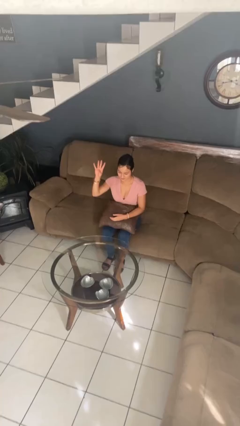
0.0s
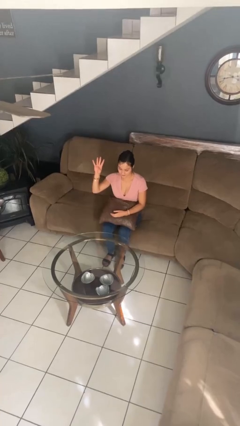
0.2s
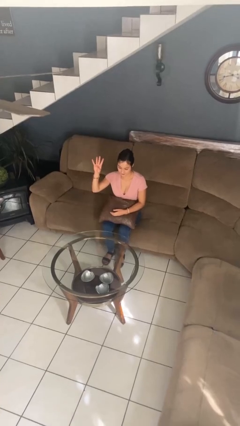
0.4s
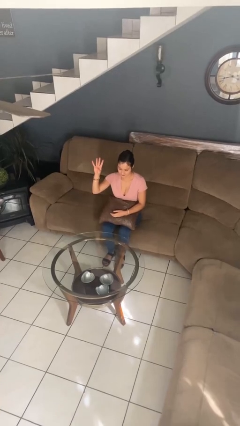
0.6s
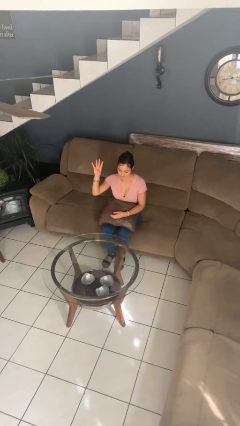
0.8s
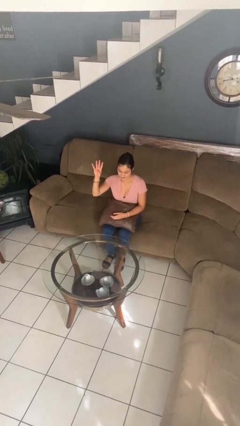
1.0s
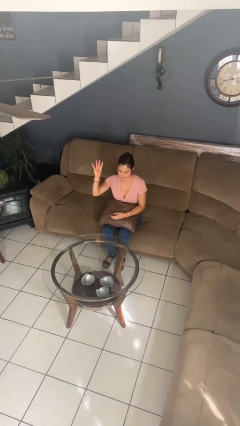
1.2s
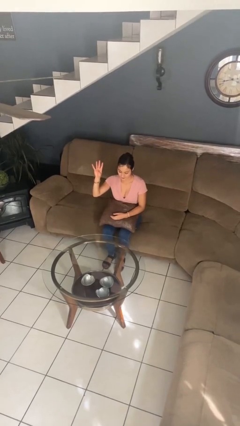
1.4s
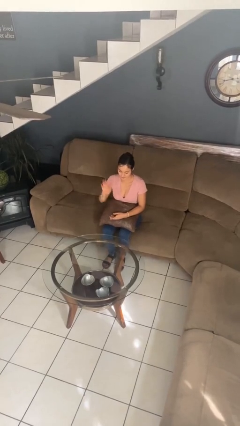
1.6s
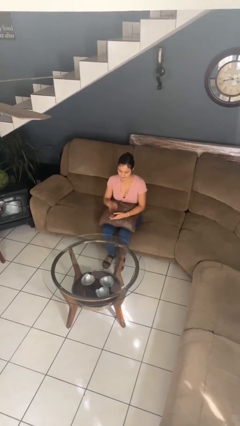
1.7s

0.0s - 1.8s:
person gestures number four

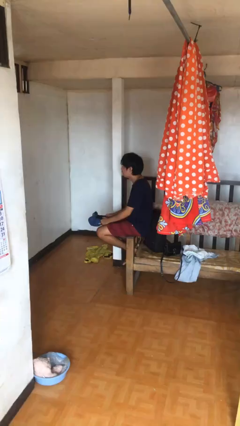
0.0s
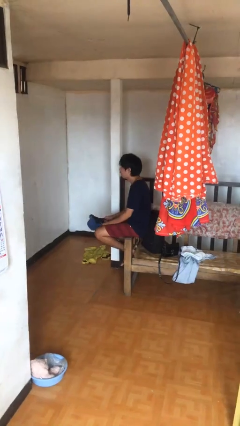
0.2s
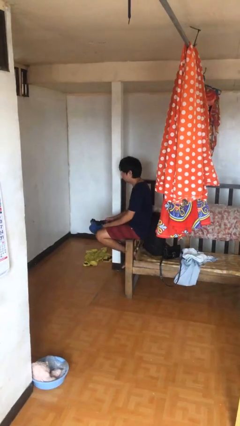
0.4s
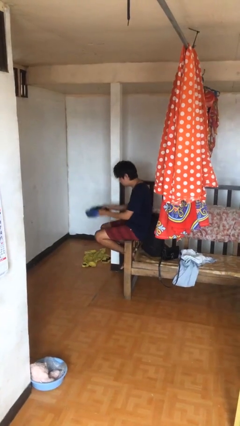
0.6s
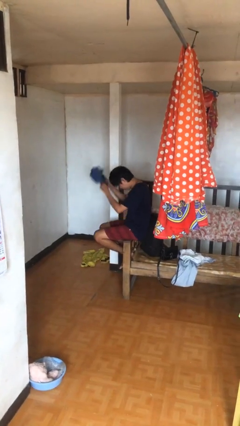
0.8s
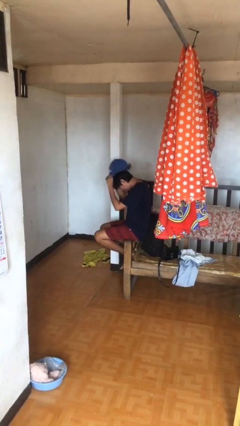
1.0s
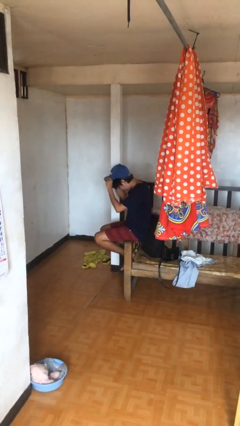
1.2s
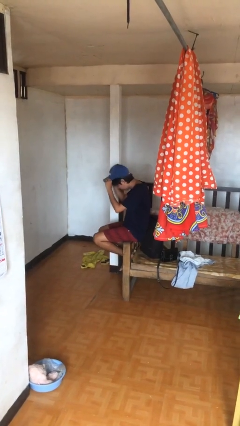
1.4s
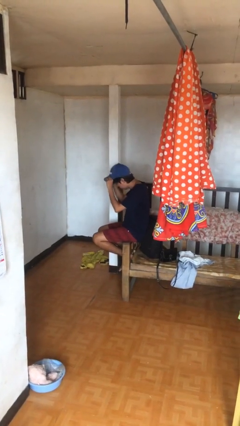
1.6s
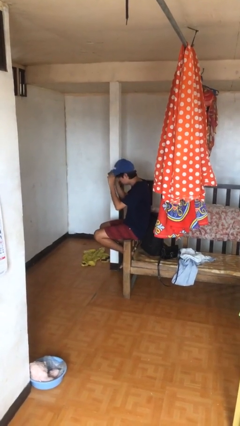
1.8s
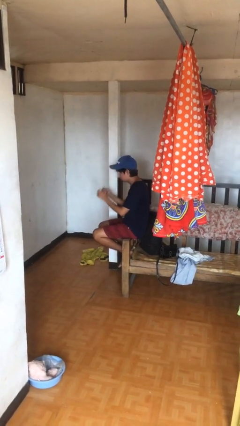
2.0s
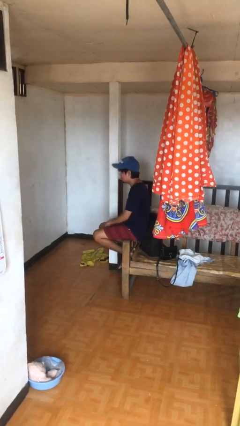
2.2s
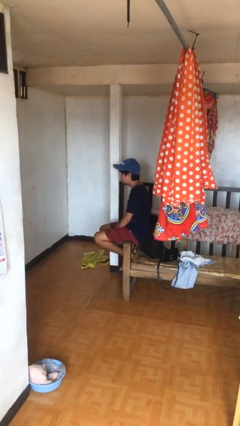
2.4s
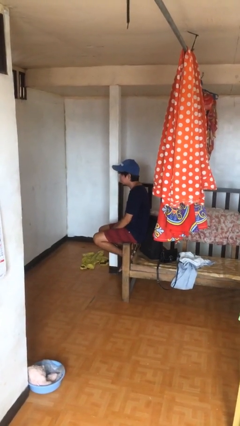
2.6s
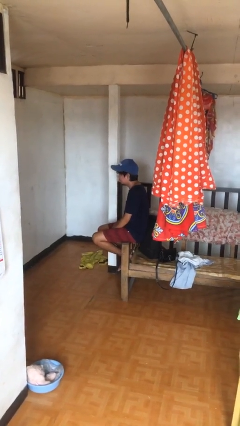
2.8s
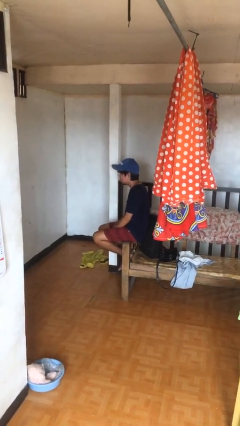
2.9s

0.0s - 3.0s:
person puts on hat

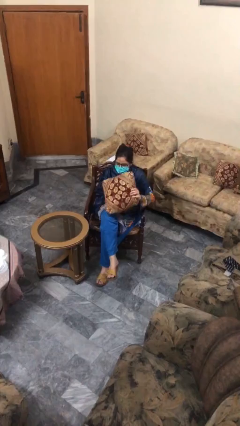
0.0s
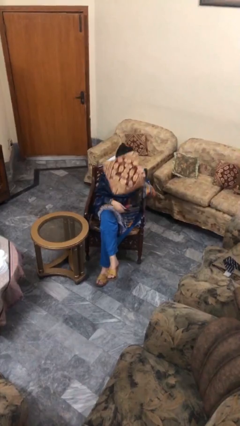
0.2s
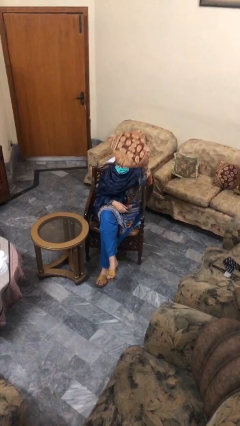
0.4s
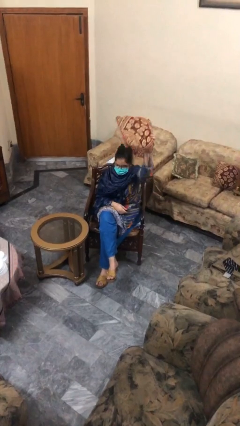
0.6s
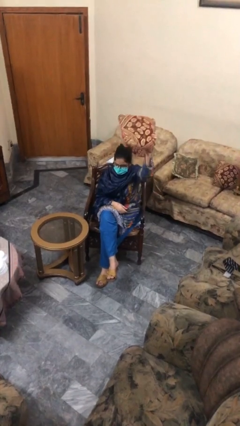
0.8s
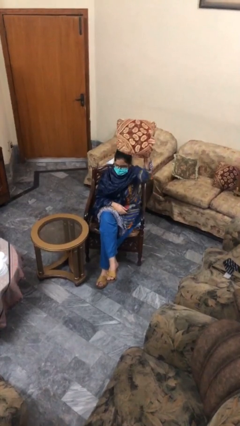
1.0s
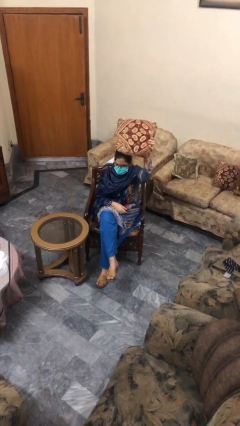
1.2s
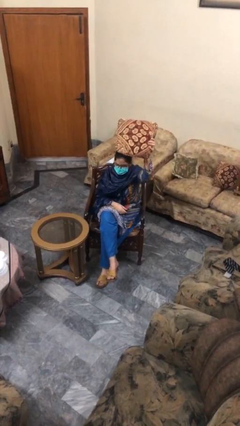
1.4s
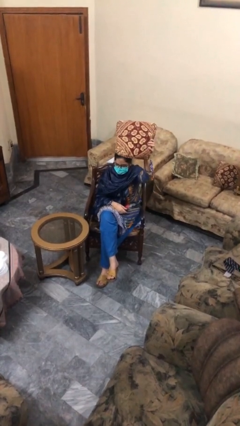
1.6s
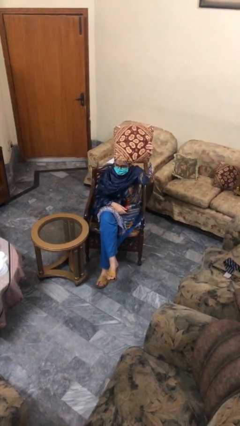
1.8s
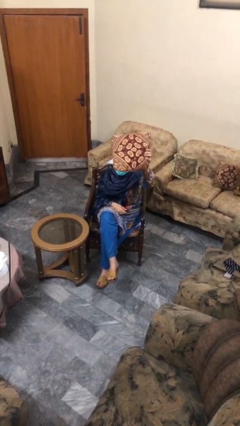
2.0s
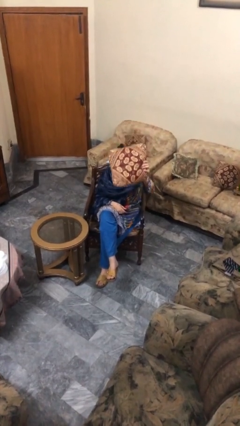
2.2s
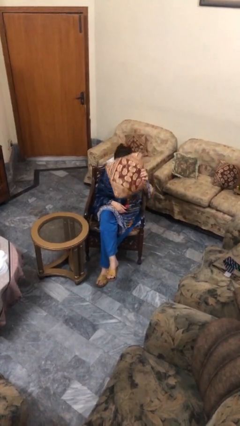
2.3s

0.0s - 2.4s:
person holds object above head

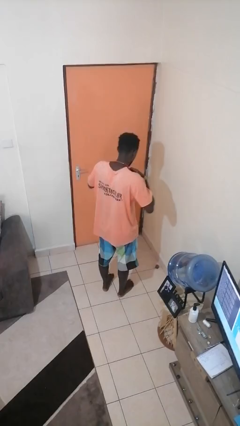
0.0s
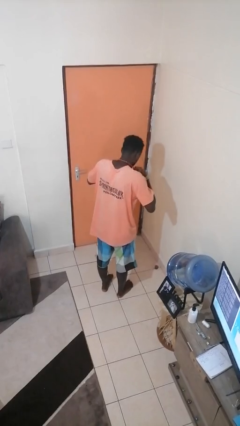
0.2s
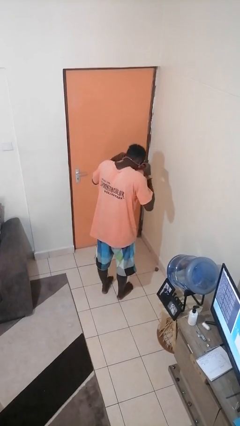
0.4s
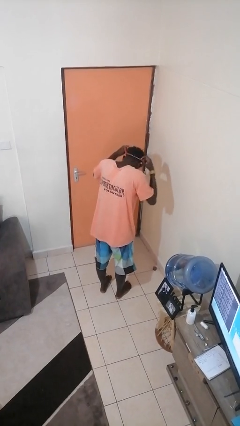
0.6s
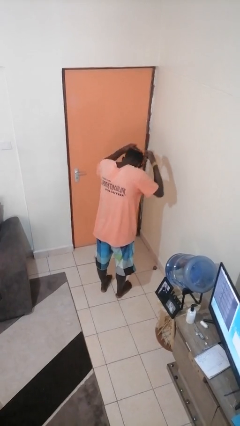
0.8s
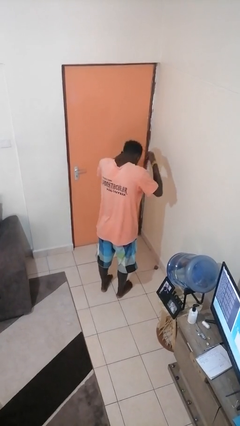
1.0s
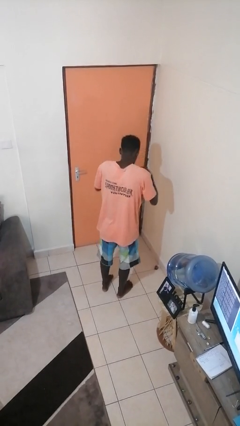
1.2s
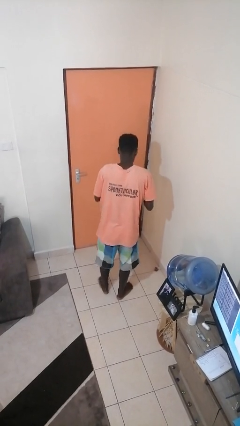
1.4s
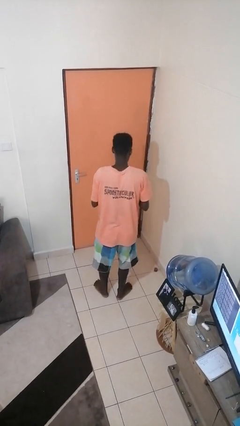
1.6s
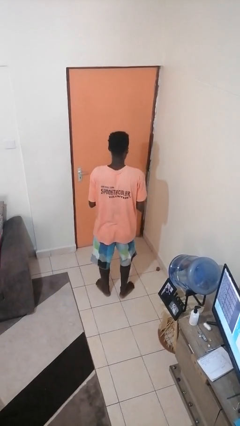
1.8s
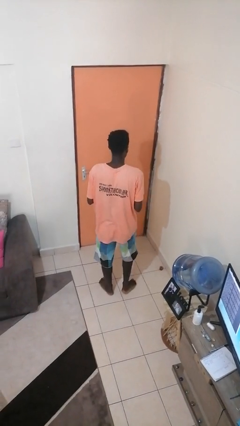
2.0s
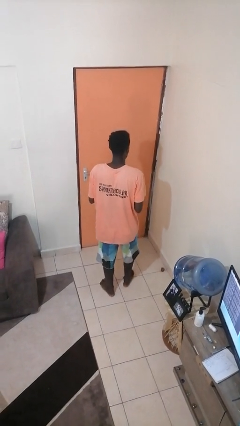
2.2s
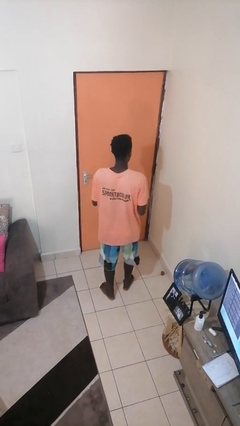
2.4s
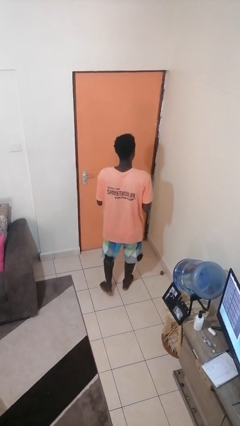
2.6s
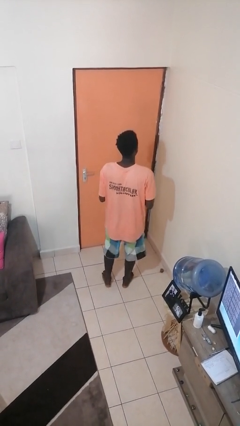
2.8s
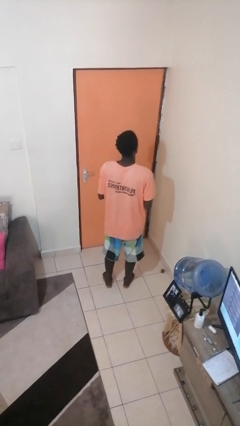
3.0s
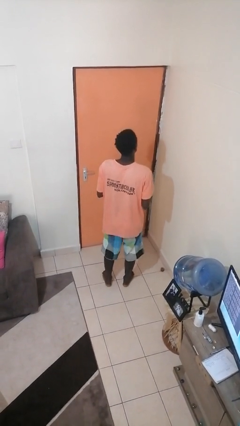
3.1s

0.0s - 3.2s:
person takes off necklace

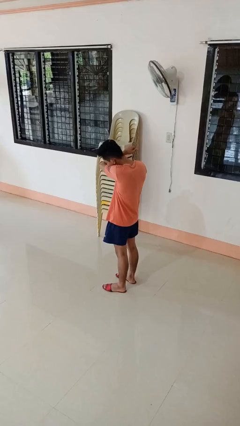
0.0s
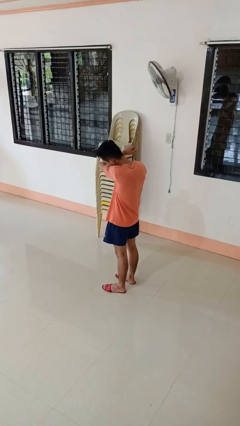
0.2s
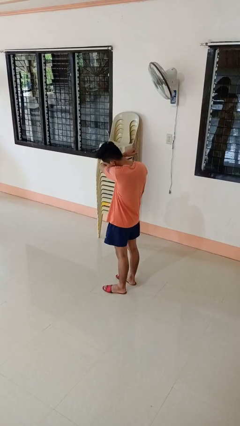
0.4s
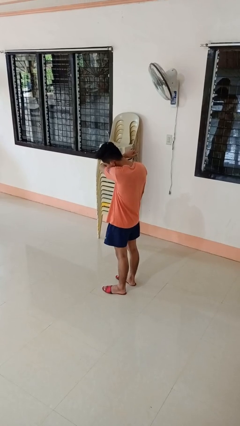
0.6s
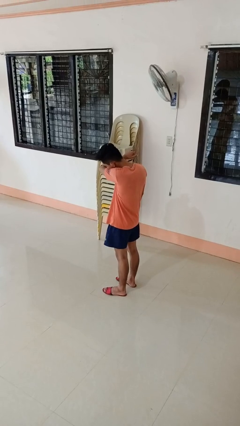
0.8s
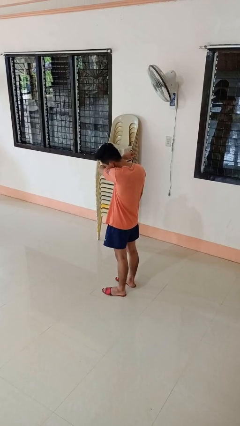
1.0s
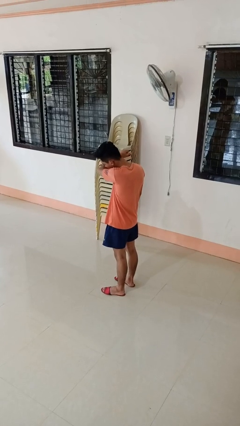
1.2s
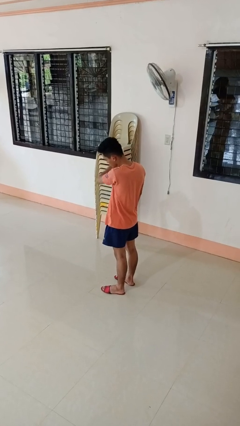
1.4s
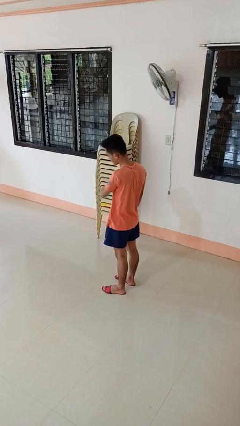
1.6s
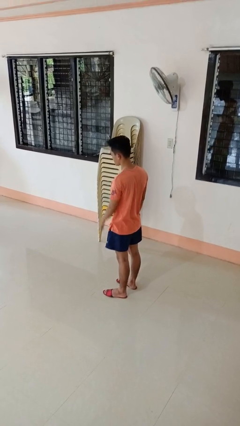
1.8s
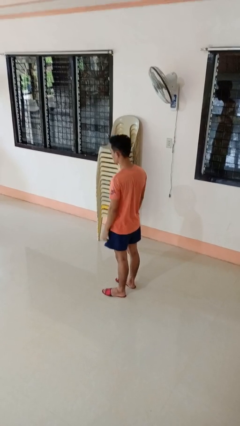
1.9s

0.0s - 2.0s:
person sneezes into arm

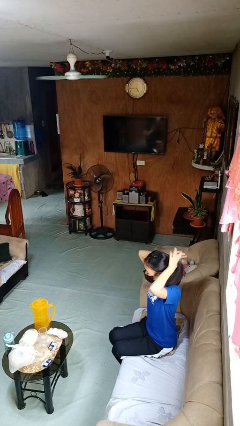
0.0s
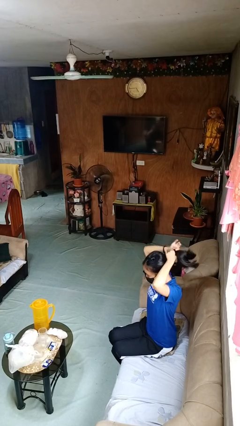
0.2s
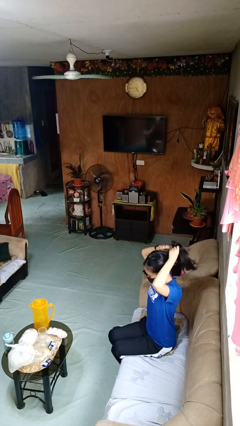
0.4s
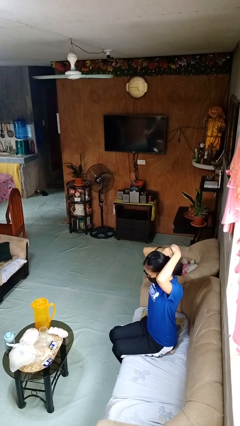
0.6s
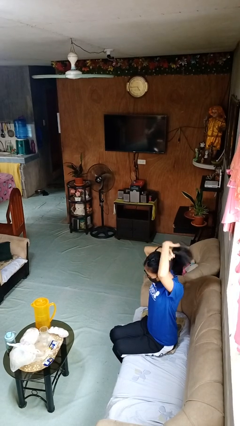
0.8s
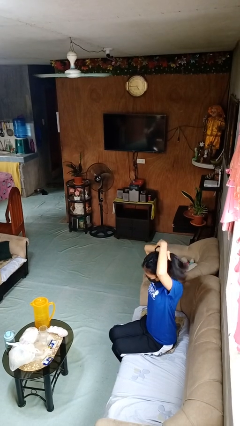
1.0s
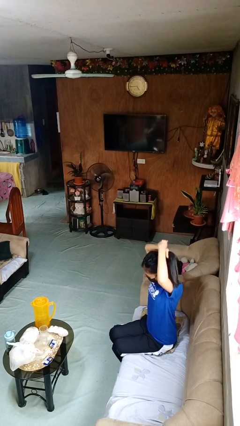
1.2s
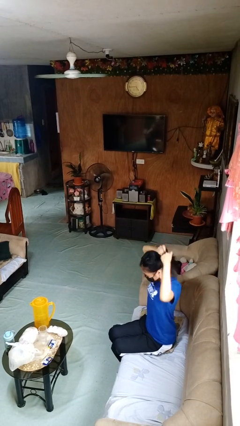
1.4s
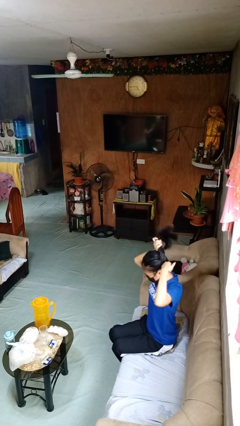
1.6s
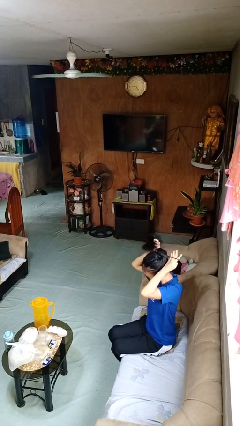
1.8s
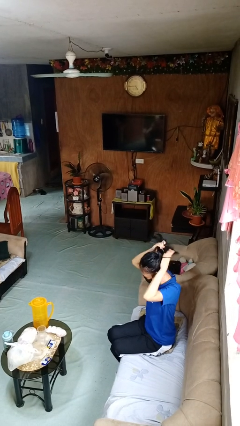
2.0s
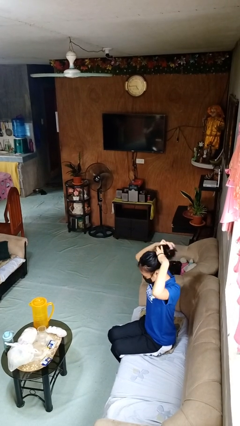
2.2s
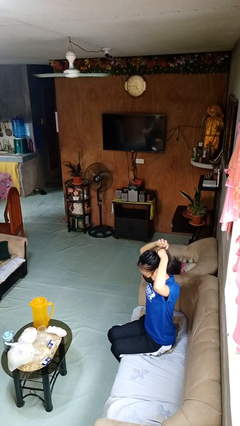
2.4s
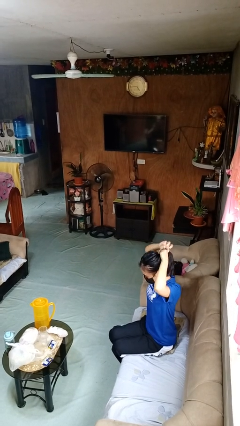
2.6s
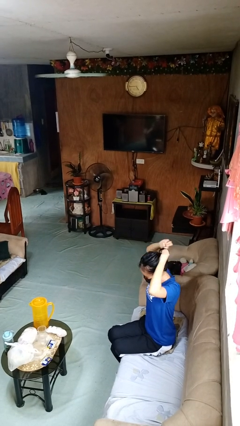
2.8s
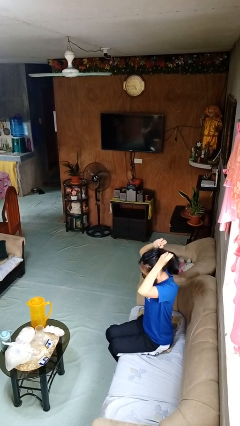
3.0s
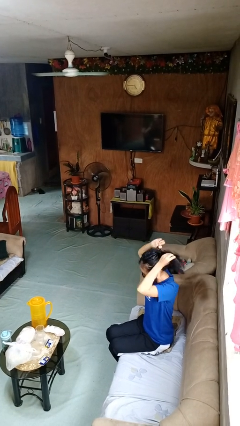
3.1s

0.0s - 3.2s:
person puts hair in ponytail

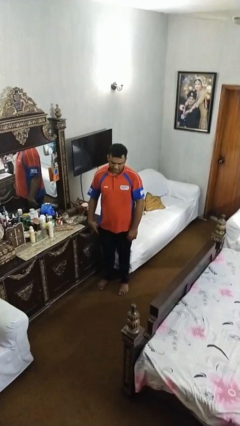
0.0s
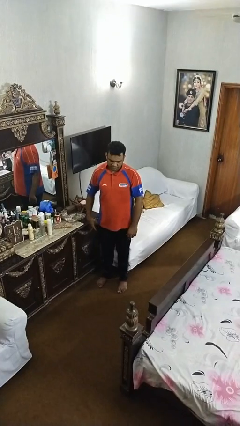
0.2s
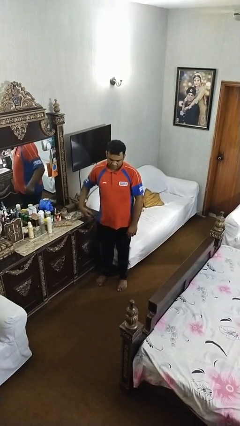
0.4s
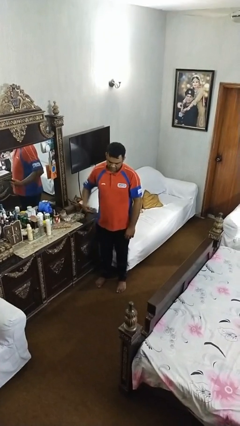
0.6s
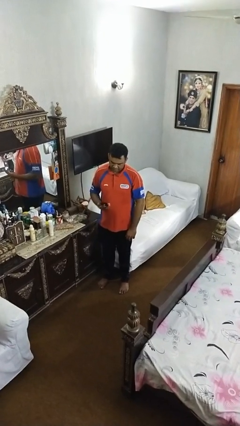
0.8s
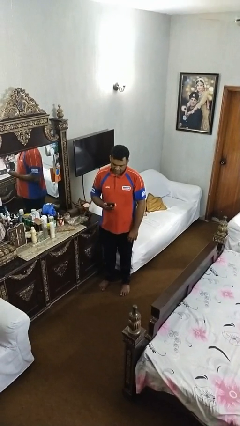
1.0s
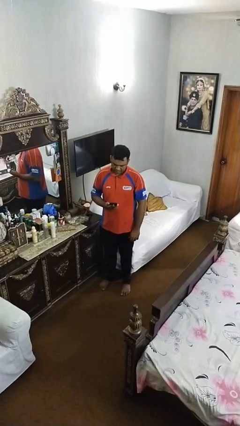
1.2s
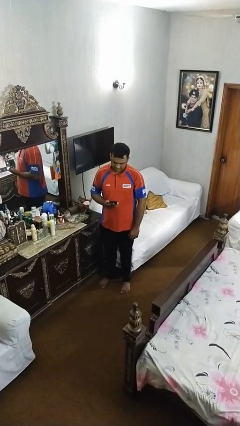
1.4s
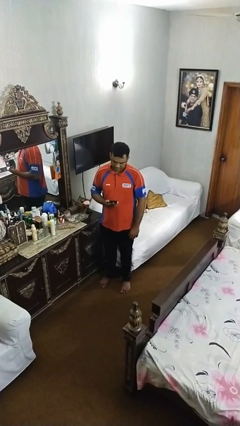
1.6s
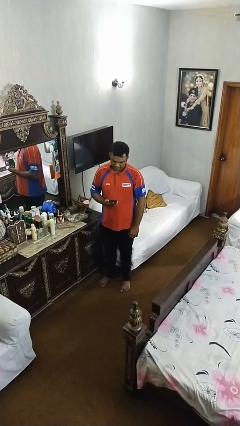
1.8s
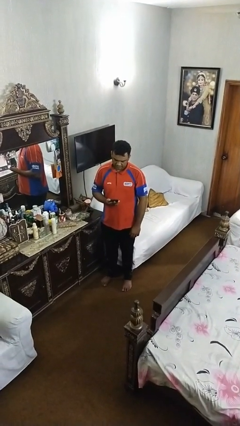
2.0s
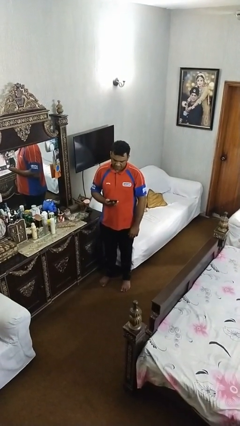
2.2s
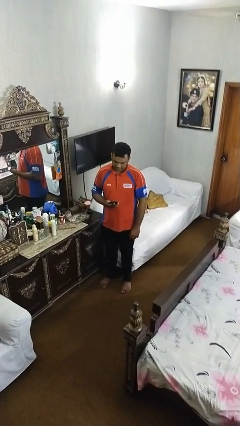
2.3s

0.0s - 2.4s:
person takes phone from pocket
